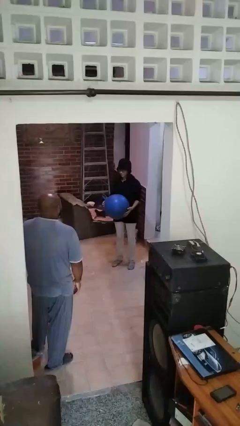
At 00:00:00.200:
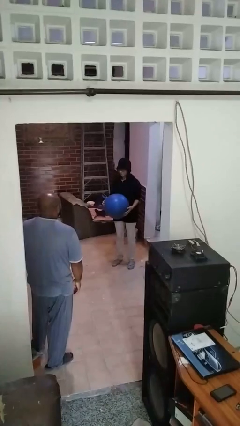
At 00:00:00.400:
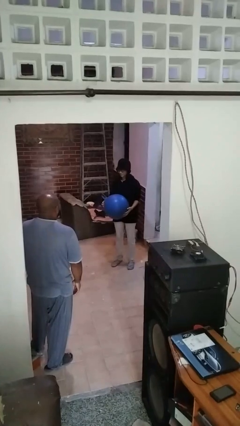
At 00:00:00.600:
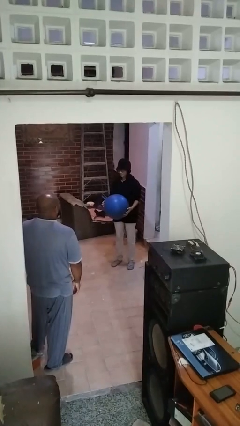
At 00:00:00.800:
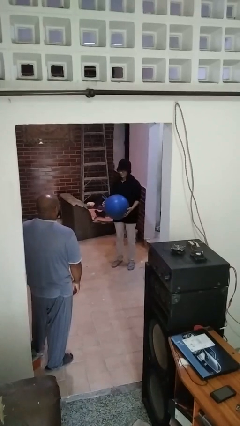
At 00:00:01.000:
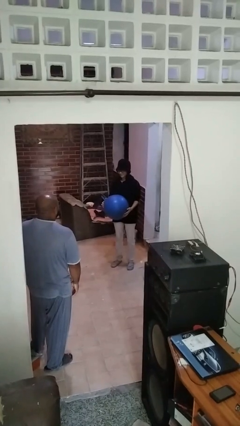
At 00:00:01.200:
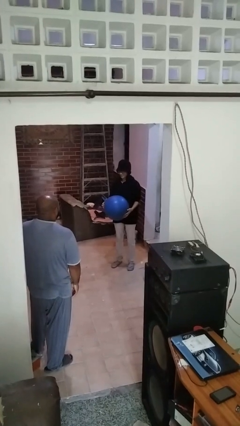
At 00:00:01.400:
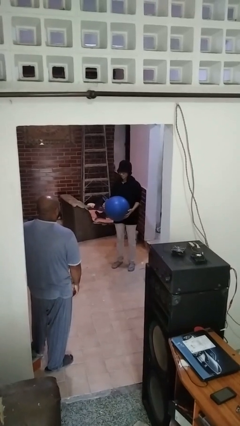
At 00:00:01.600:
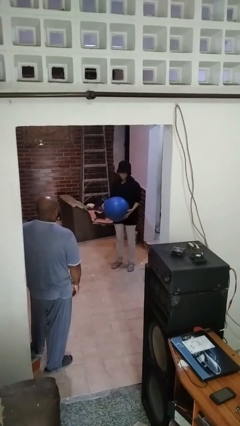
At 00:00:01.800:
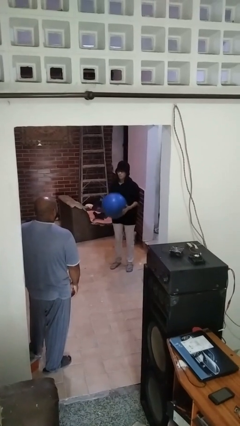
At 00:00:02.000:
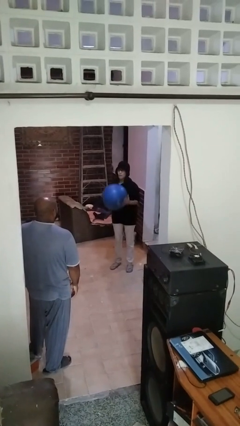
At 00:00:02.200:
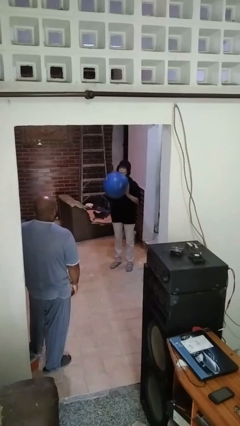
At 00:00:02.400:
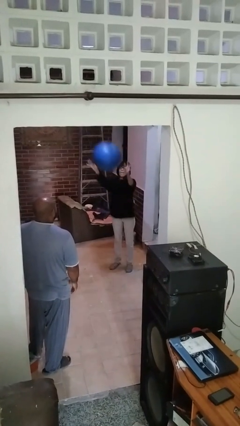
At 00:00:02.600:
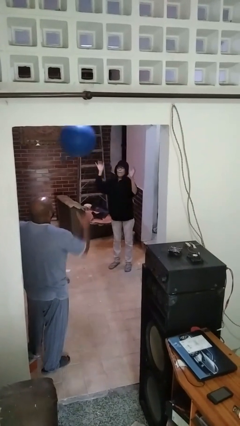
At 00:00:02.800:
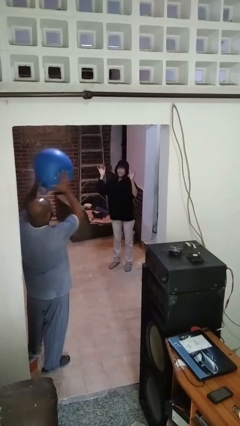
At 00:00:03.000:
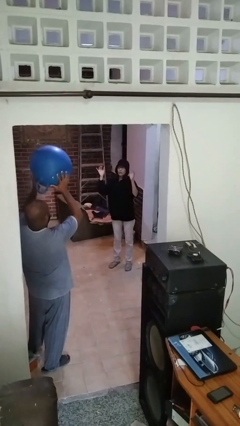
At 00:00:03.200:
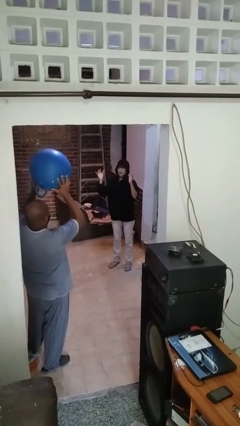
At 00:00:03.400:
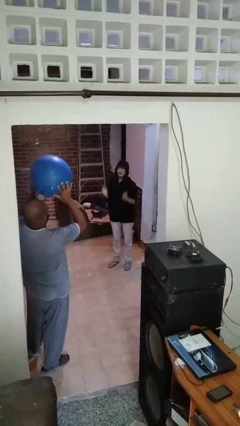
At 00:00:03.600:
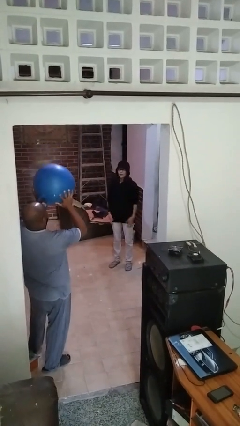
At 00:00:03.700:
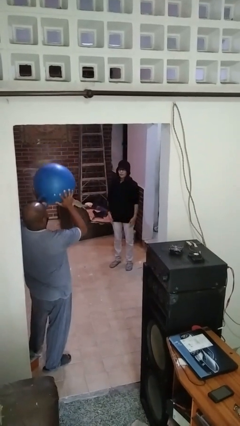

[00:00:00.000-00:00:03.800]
person throws object to person

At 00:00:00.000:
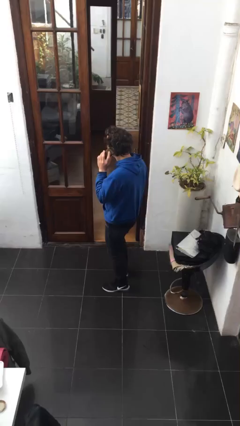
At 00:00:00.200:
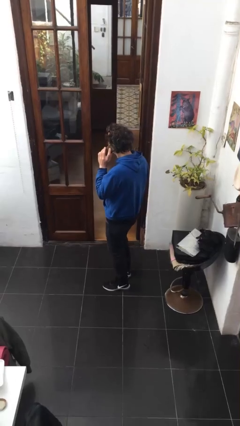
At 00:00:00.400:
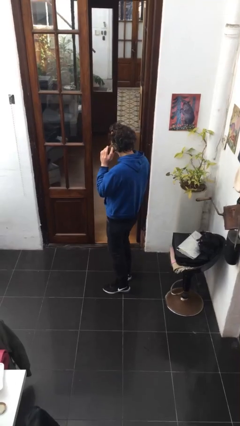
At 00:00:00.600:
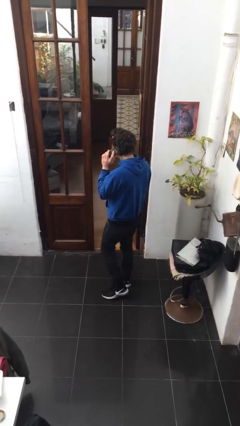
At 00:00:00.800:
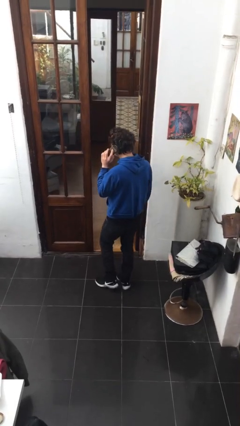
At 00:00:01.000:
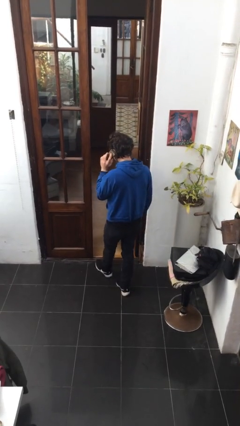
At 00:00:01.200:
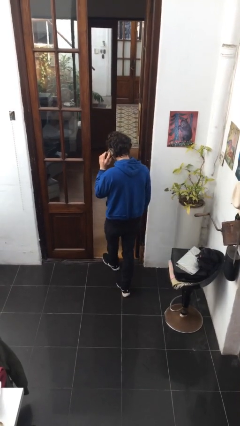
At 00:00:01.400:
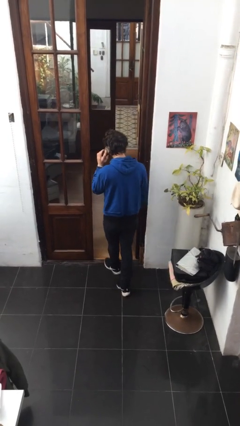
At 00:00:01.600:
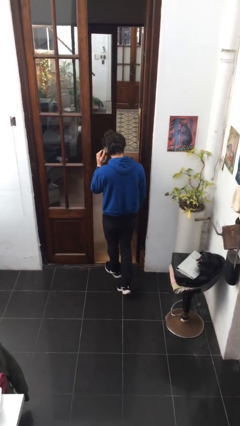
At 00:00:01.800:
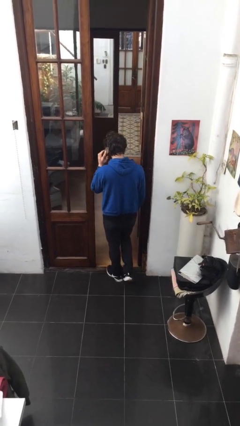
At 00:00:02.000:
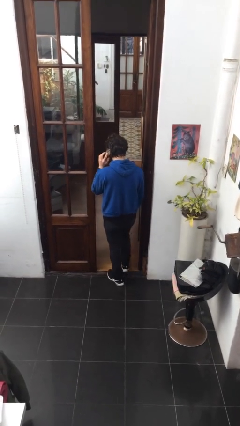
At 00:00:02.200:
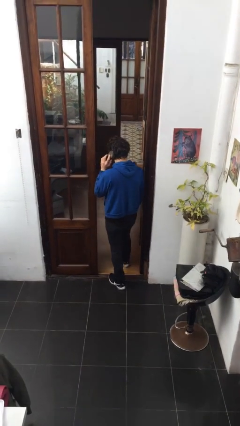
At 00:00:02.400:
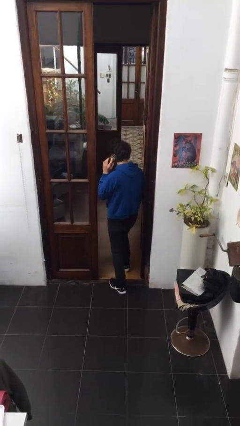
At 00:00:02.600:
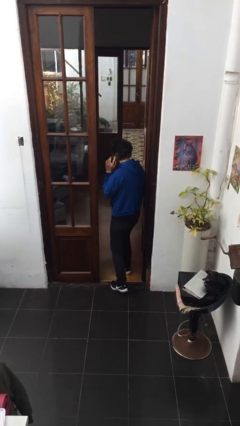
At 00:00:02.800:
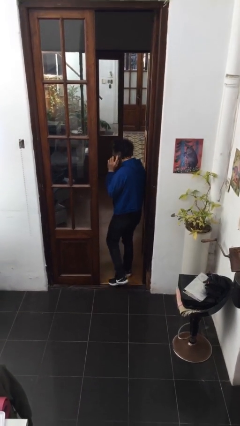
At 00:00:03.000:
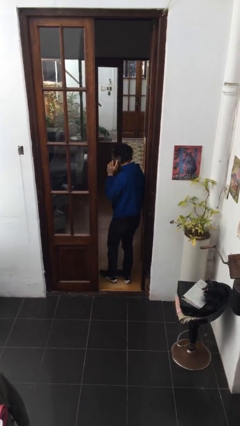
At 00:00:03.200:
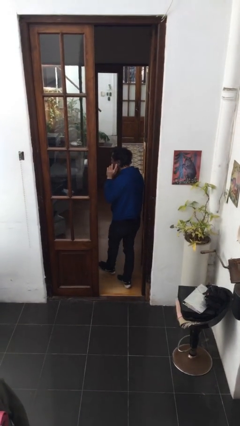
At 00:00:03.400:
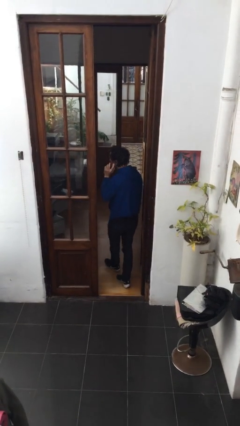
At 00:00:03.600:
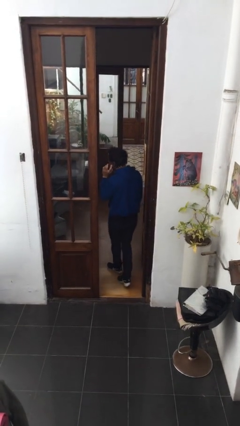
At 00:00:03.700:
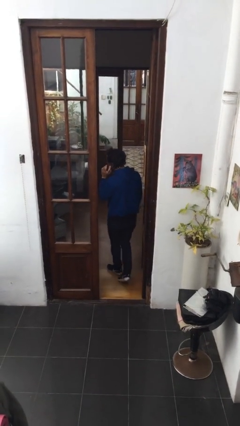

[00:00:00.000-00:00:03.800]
person exits scene through structure

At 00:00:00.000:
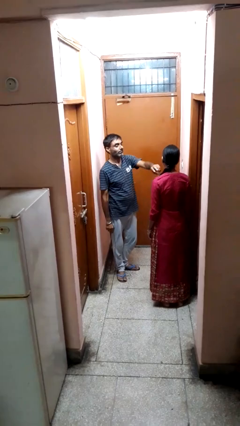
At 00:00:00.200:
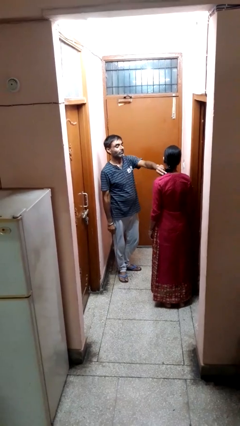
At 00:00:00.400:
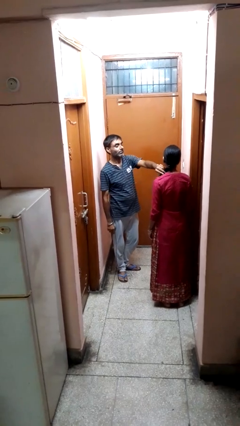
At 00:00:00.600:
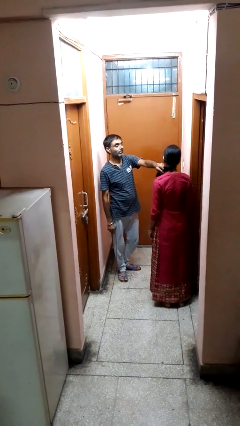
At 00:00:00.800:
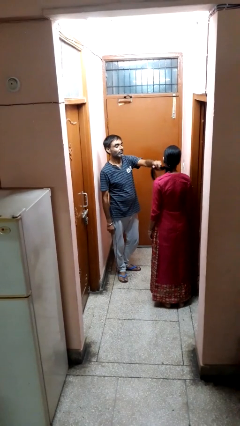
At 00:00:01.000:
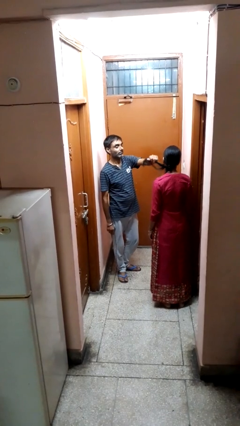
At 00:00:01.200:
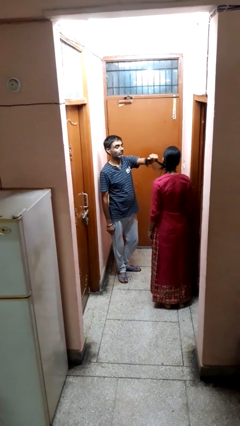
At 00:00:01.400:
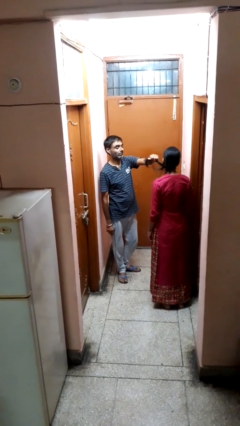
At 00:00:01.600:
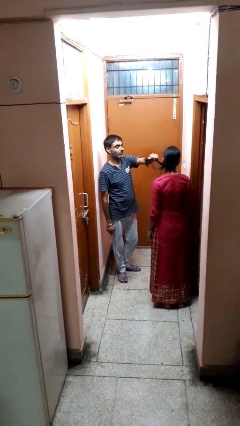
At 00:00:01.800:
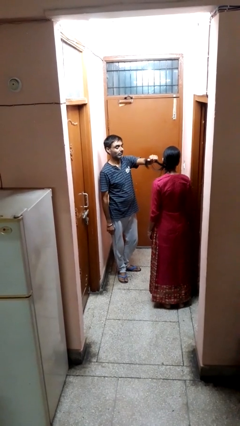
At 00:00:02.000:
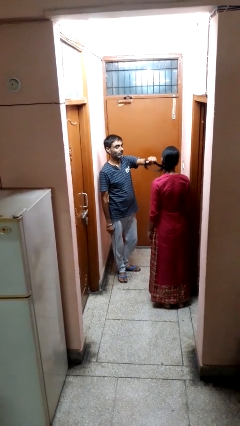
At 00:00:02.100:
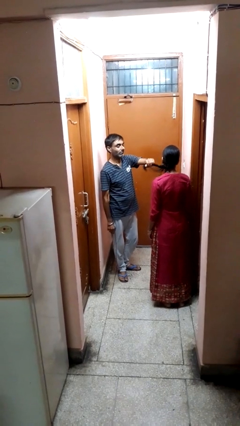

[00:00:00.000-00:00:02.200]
person grabs person by hair

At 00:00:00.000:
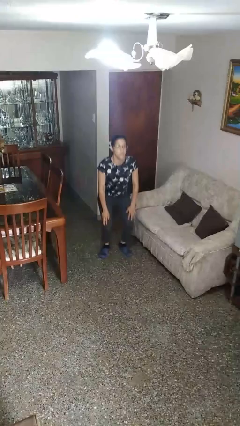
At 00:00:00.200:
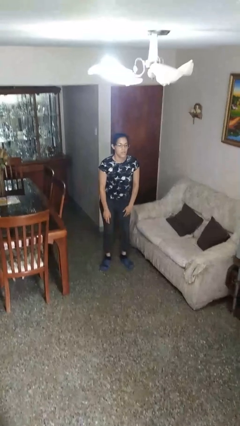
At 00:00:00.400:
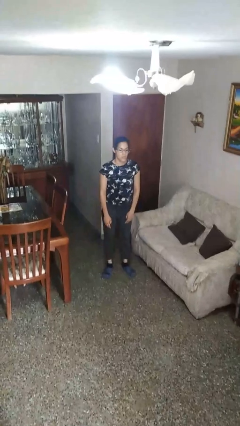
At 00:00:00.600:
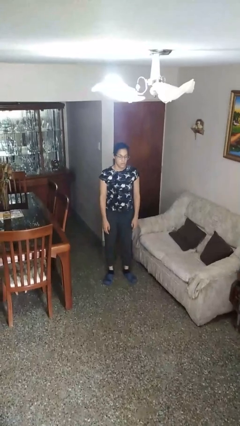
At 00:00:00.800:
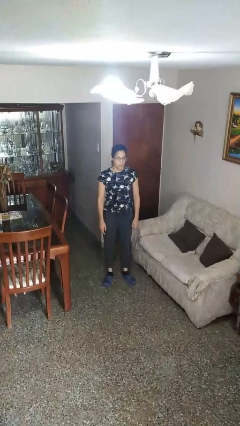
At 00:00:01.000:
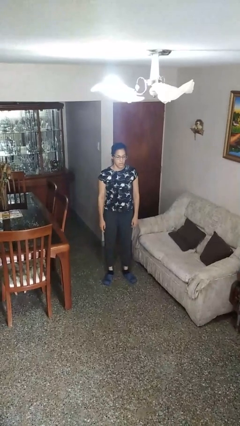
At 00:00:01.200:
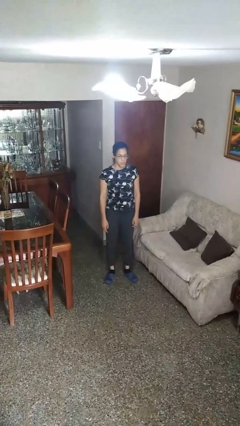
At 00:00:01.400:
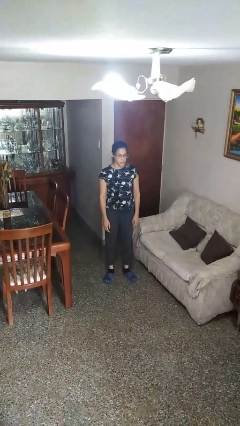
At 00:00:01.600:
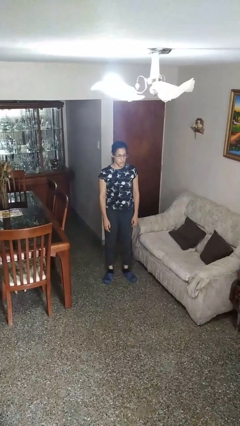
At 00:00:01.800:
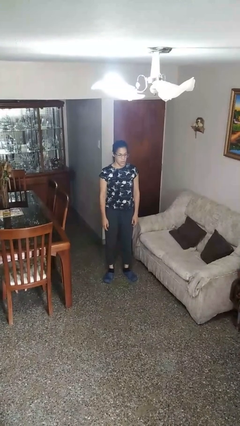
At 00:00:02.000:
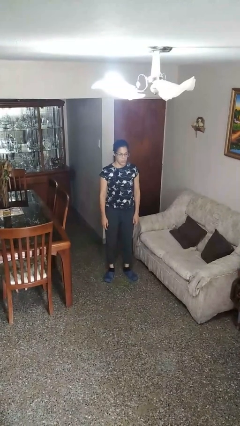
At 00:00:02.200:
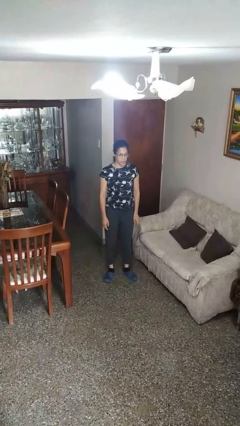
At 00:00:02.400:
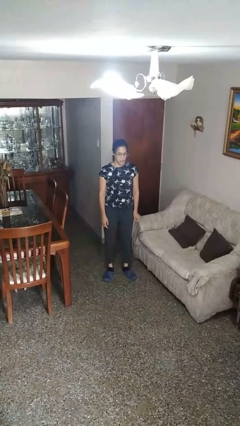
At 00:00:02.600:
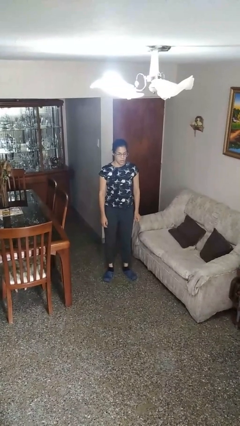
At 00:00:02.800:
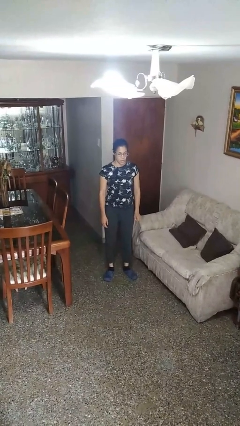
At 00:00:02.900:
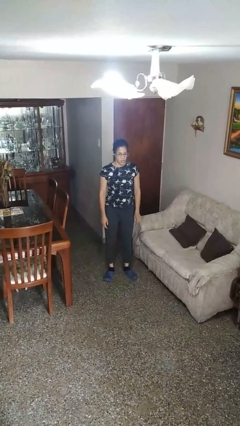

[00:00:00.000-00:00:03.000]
person stands up

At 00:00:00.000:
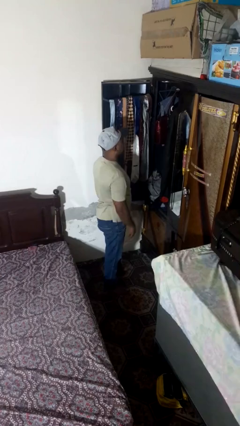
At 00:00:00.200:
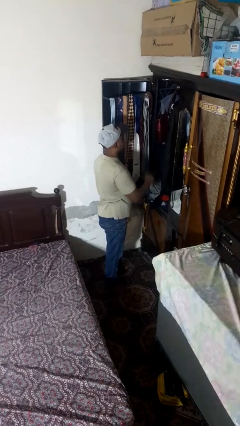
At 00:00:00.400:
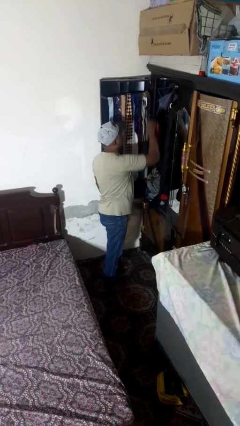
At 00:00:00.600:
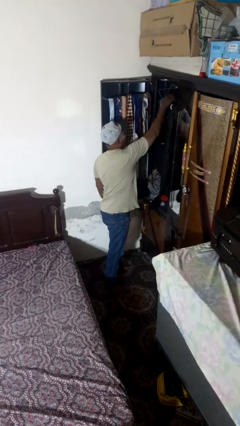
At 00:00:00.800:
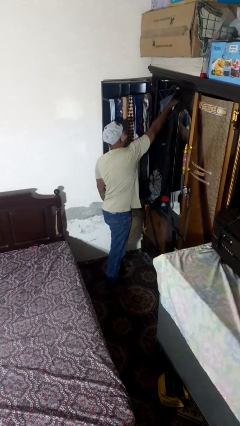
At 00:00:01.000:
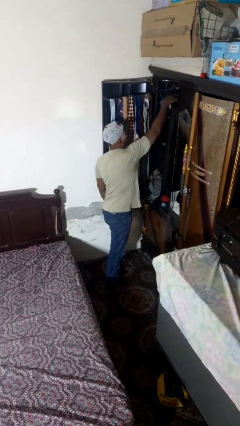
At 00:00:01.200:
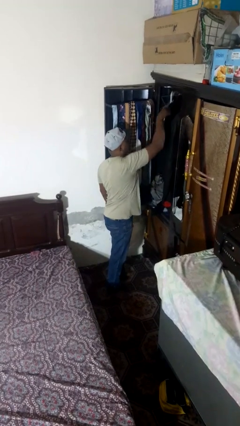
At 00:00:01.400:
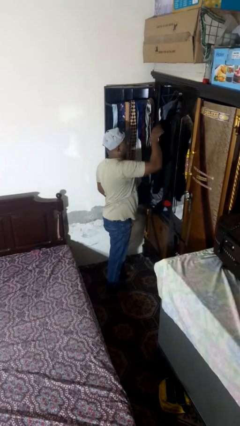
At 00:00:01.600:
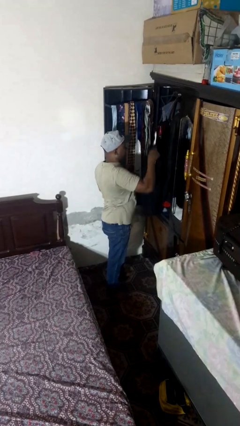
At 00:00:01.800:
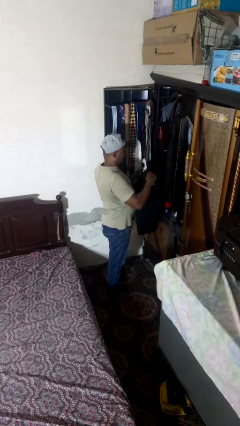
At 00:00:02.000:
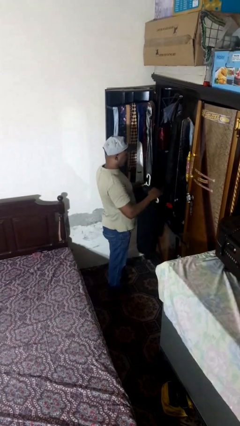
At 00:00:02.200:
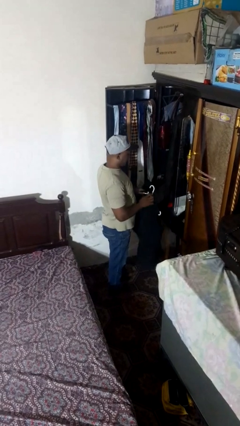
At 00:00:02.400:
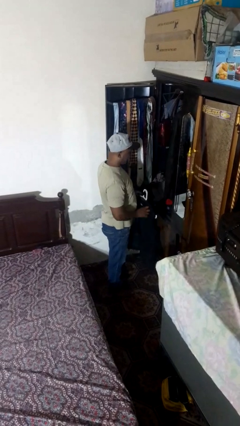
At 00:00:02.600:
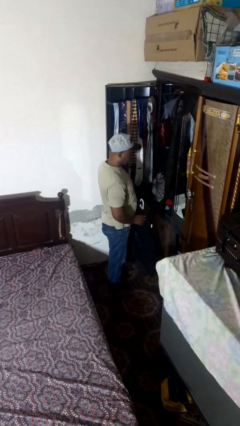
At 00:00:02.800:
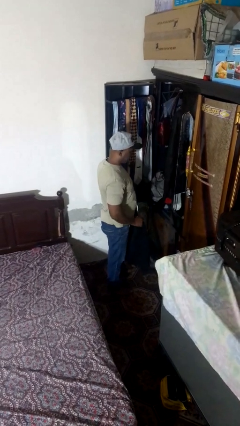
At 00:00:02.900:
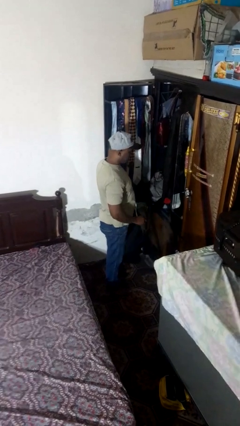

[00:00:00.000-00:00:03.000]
person takes clothes from closet

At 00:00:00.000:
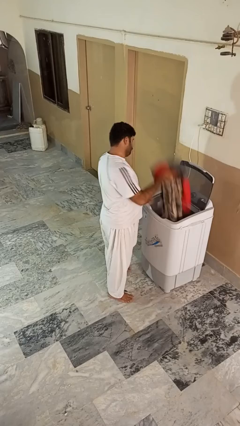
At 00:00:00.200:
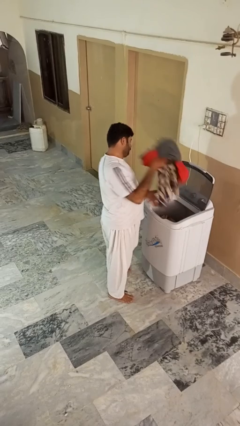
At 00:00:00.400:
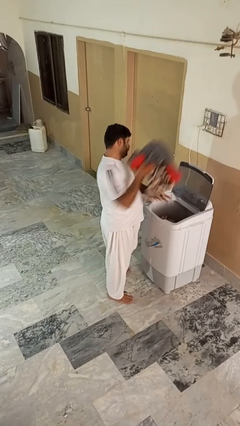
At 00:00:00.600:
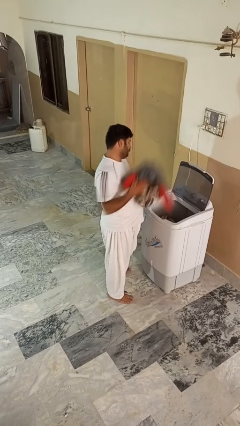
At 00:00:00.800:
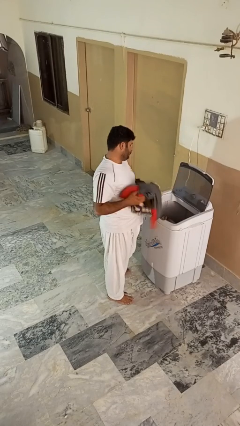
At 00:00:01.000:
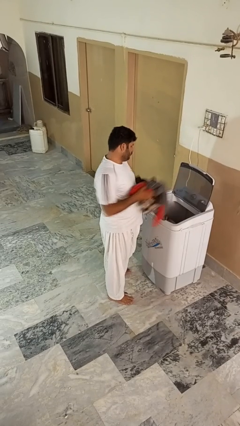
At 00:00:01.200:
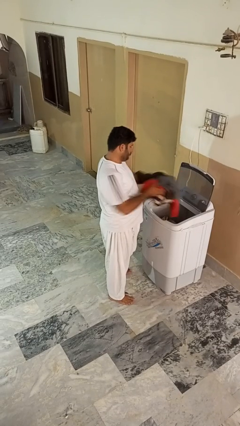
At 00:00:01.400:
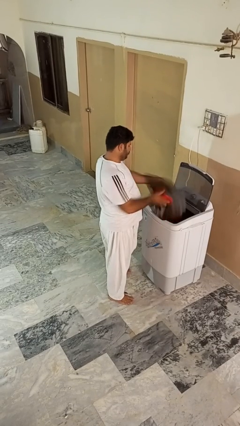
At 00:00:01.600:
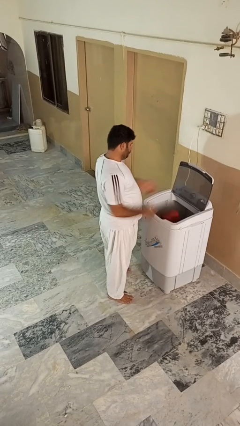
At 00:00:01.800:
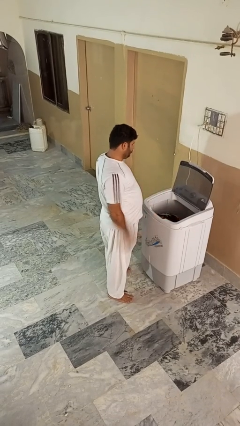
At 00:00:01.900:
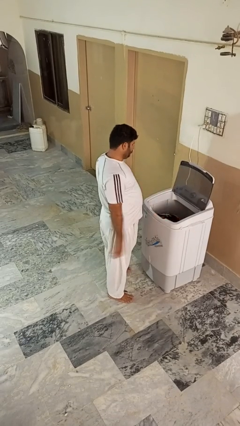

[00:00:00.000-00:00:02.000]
person loads clotheswasher
